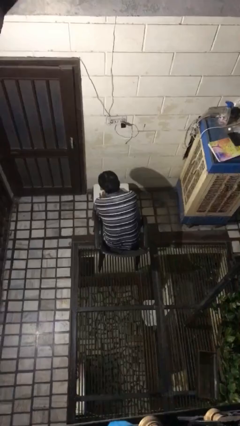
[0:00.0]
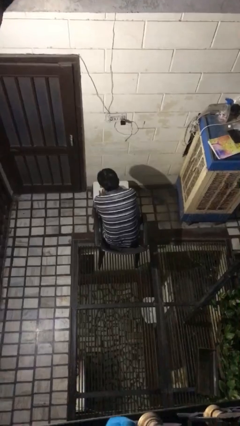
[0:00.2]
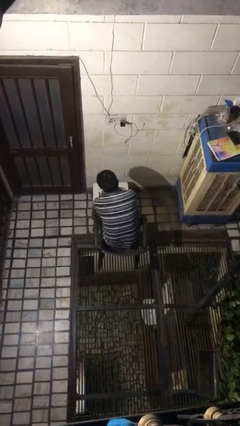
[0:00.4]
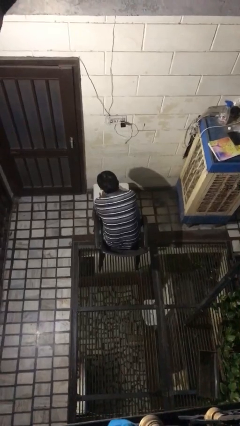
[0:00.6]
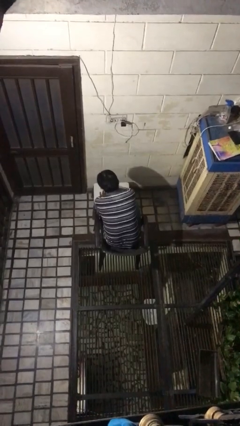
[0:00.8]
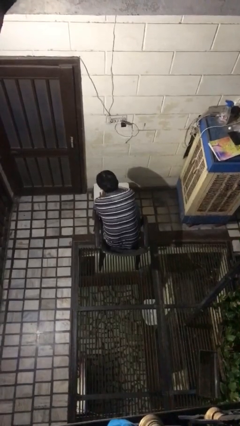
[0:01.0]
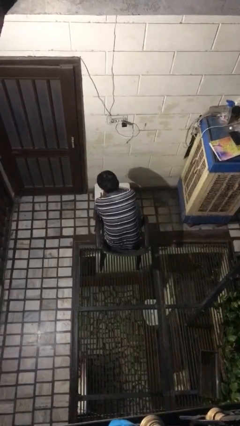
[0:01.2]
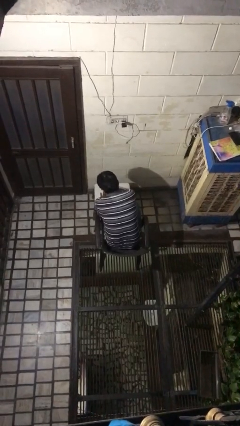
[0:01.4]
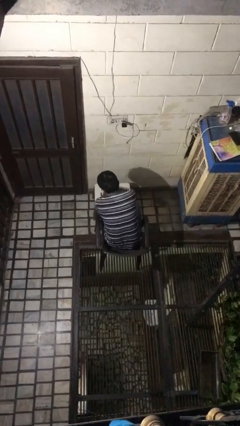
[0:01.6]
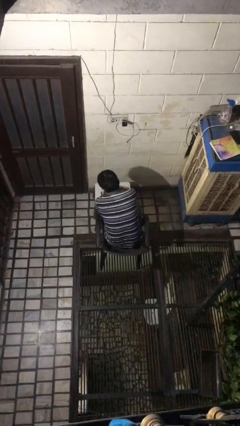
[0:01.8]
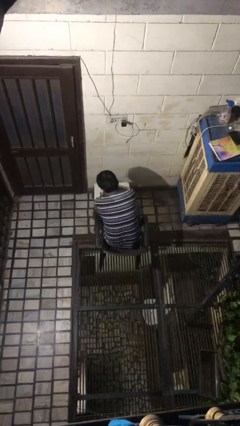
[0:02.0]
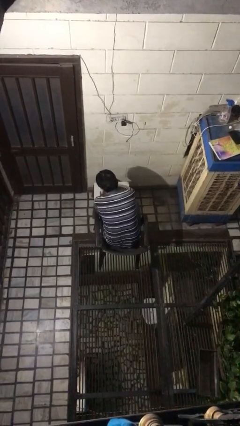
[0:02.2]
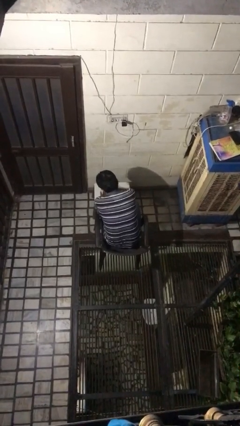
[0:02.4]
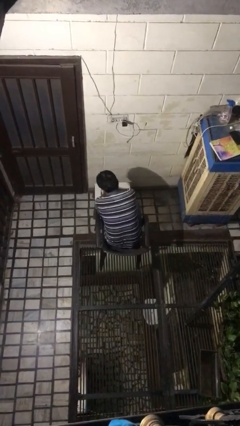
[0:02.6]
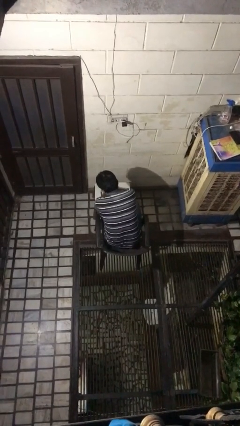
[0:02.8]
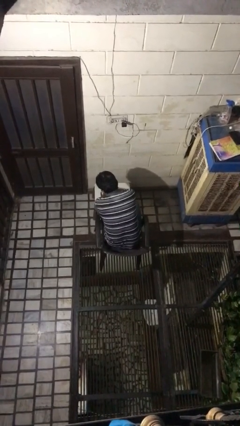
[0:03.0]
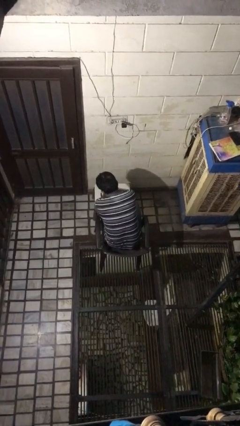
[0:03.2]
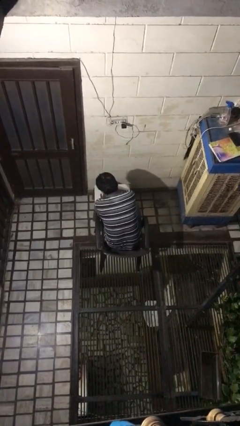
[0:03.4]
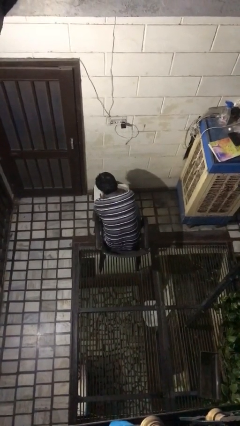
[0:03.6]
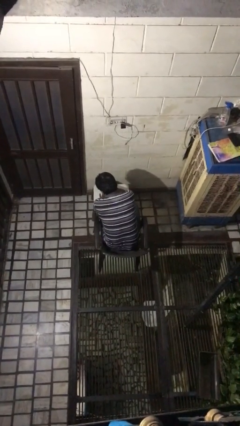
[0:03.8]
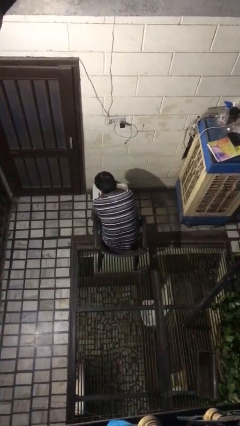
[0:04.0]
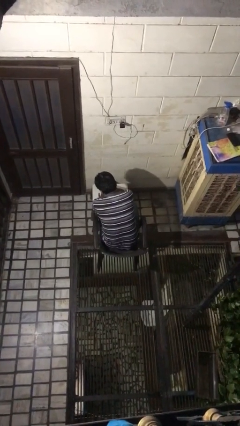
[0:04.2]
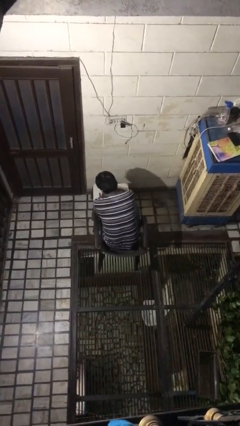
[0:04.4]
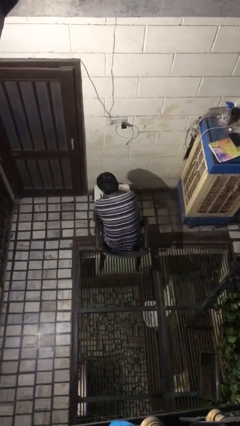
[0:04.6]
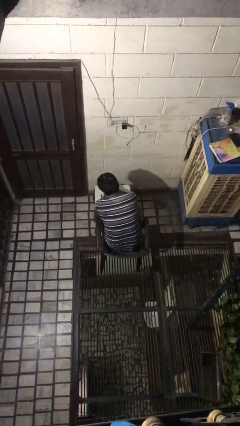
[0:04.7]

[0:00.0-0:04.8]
person paints fingernails

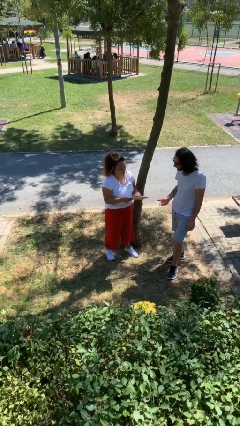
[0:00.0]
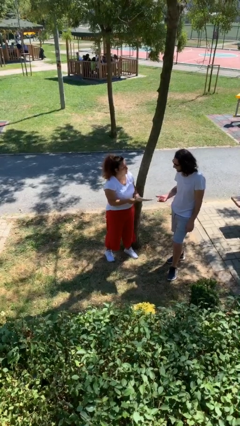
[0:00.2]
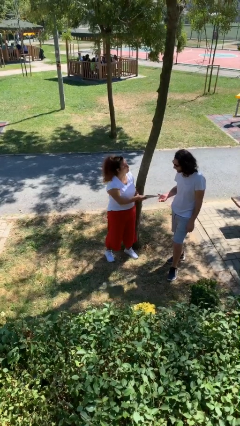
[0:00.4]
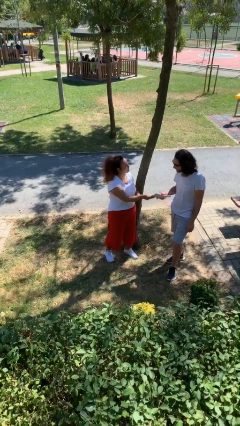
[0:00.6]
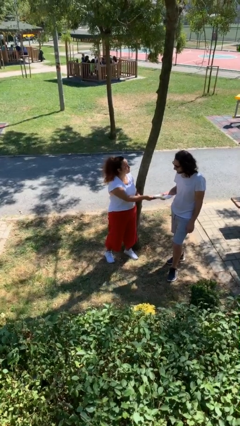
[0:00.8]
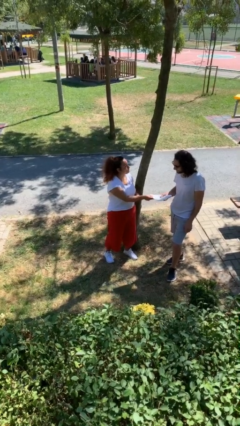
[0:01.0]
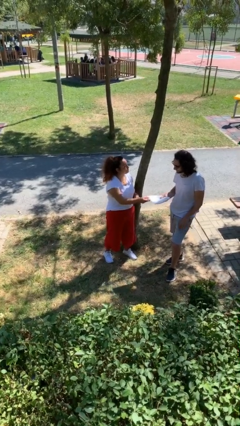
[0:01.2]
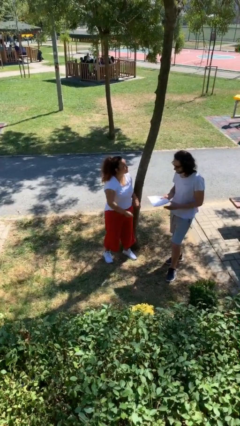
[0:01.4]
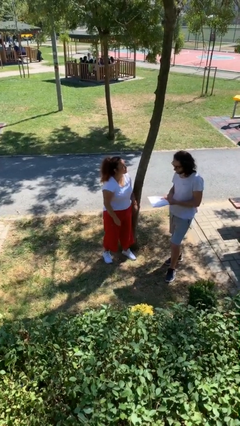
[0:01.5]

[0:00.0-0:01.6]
person transfers object to person

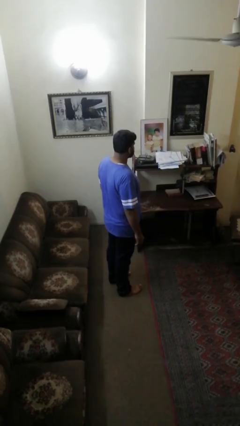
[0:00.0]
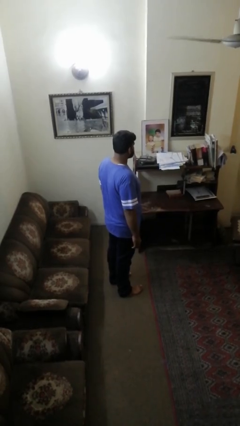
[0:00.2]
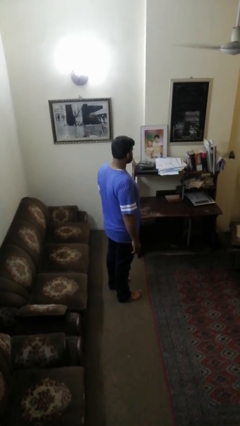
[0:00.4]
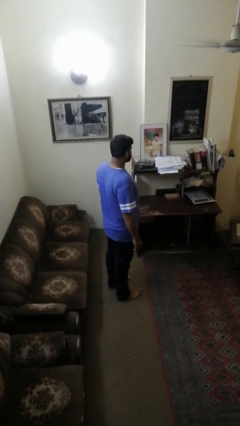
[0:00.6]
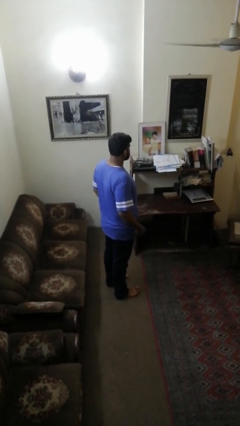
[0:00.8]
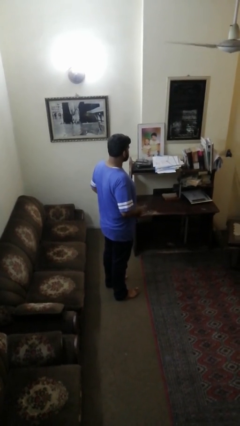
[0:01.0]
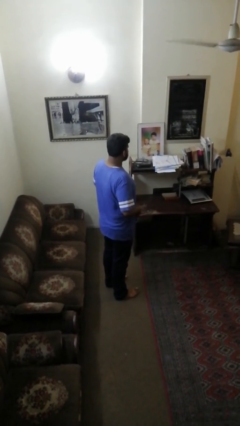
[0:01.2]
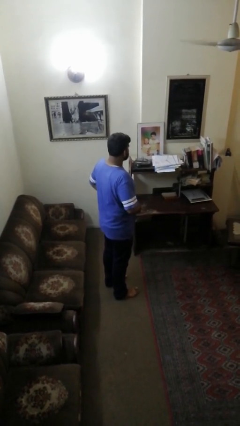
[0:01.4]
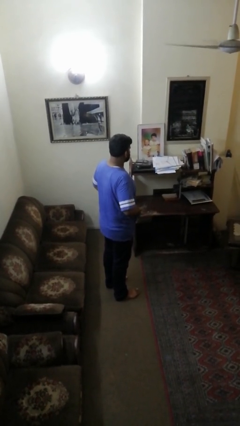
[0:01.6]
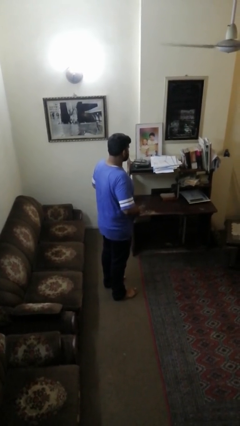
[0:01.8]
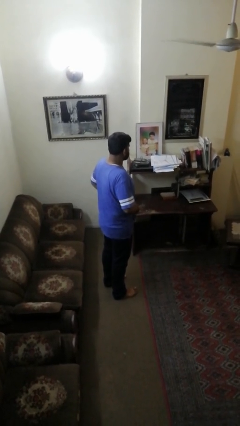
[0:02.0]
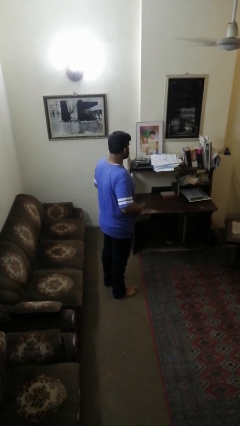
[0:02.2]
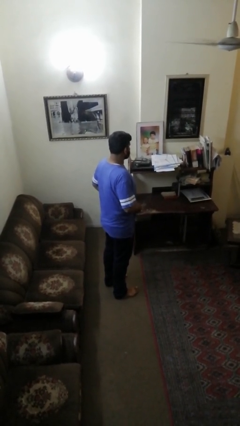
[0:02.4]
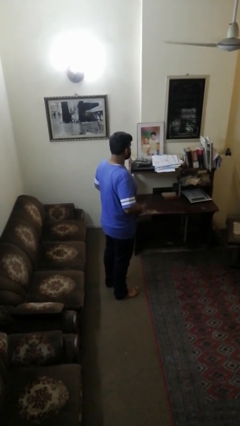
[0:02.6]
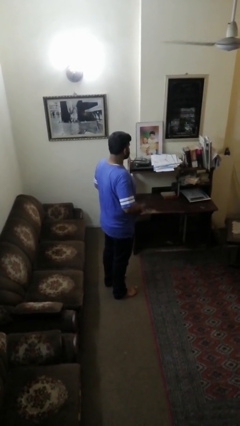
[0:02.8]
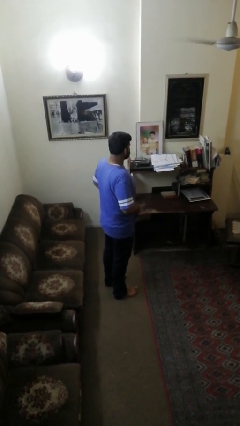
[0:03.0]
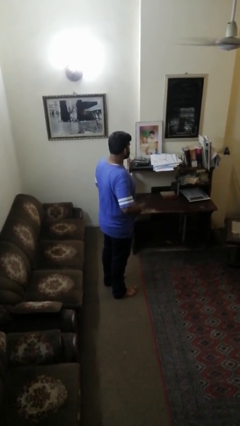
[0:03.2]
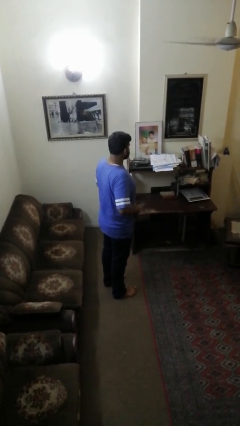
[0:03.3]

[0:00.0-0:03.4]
person hikes up pants

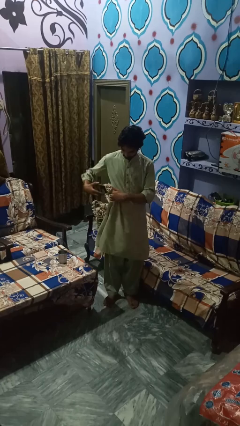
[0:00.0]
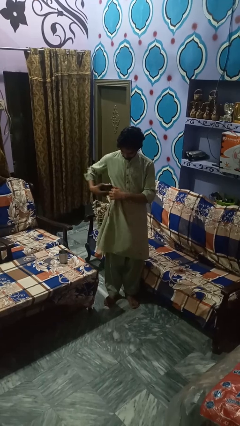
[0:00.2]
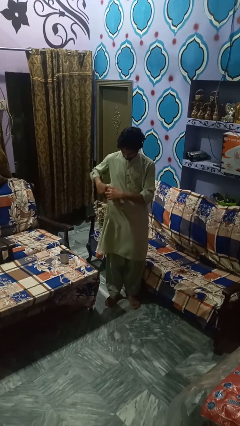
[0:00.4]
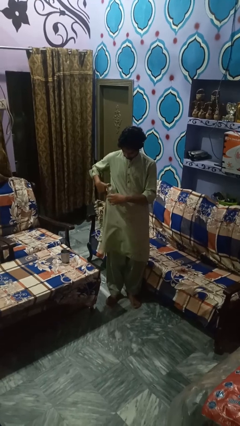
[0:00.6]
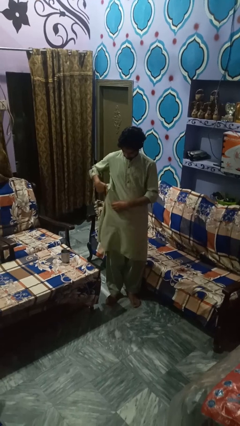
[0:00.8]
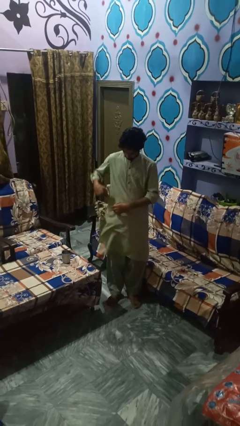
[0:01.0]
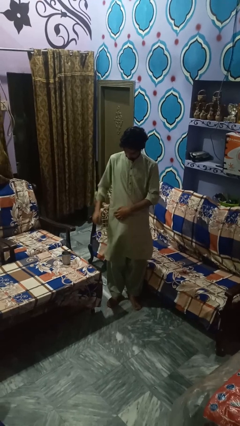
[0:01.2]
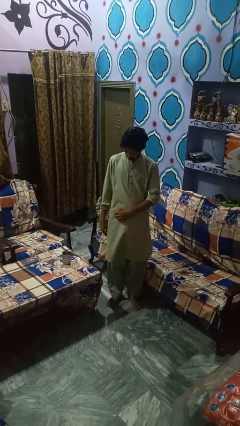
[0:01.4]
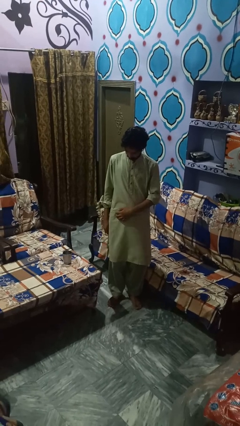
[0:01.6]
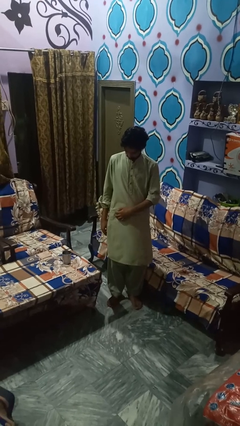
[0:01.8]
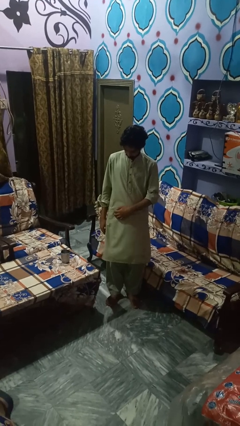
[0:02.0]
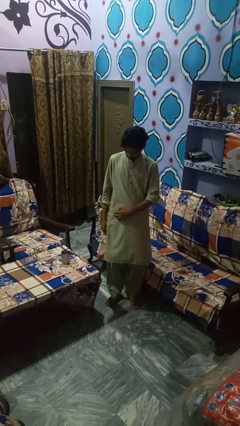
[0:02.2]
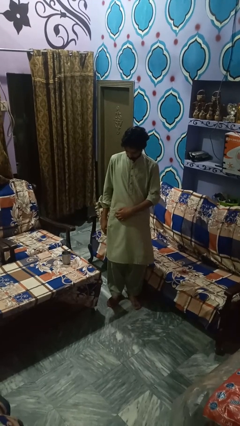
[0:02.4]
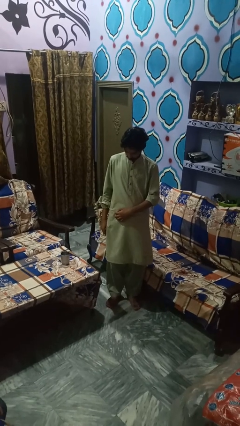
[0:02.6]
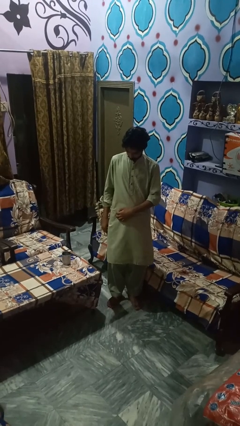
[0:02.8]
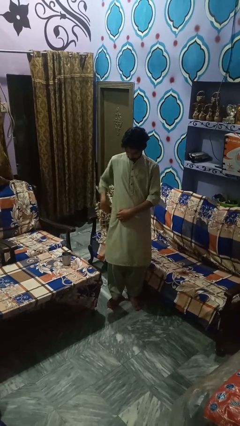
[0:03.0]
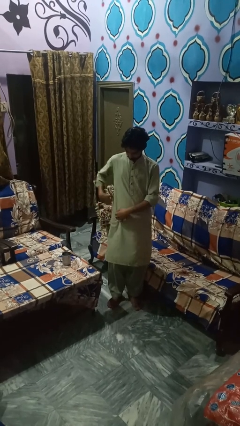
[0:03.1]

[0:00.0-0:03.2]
person puts phone into pocket

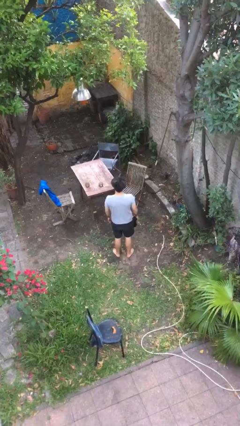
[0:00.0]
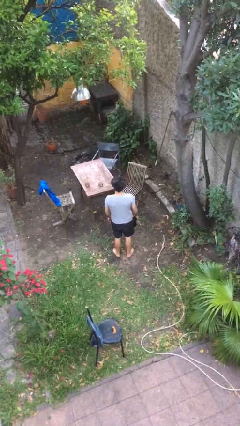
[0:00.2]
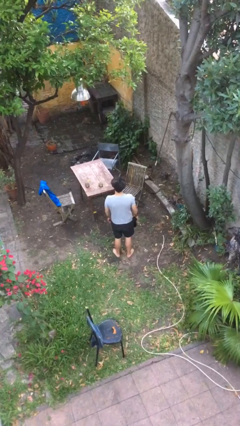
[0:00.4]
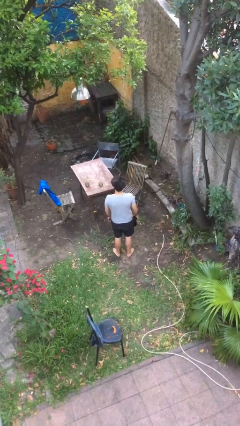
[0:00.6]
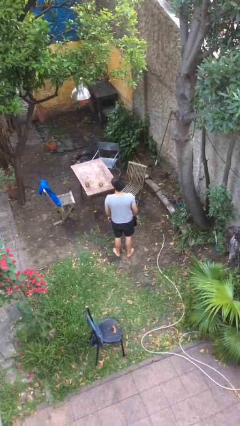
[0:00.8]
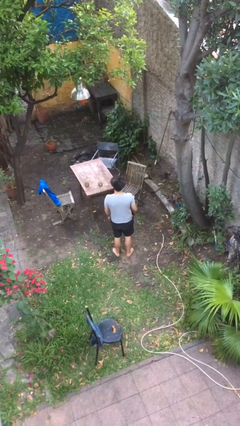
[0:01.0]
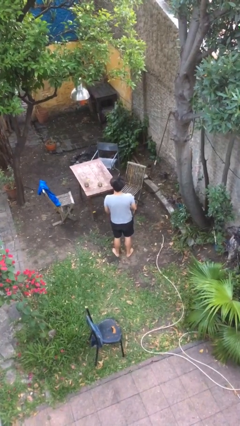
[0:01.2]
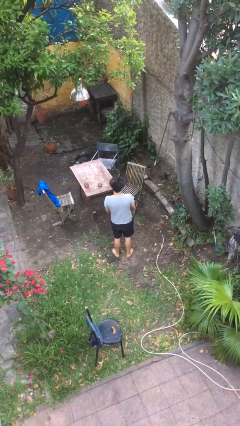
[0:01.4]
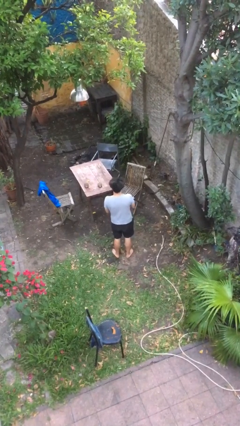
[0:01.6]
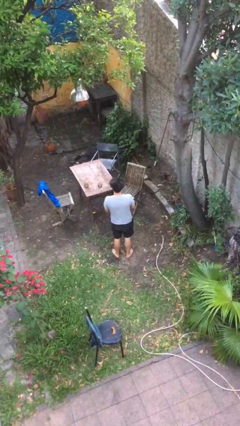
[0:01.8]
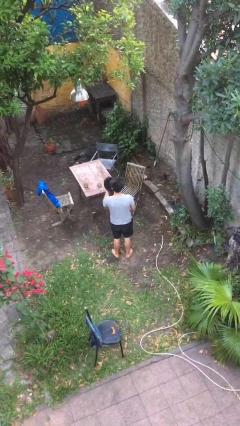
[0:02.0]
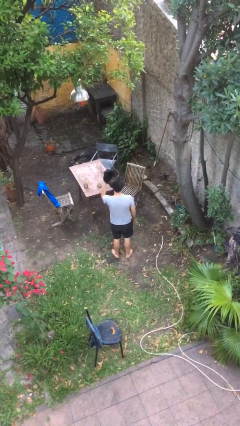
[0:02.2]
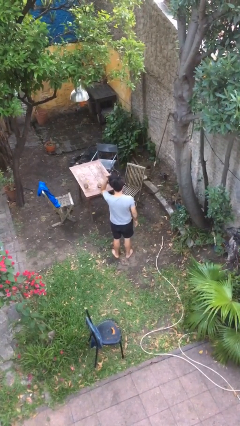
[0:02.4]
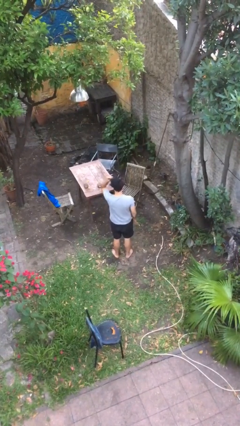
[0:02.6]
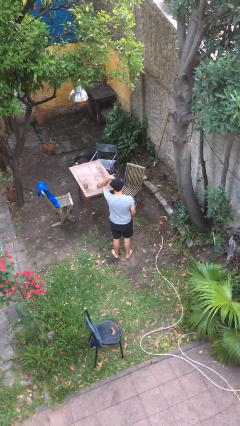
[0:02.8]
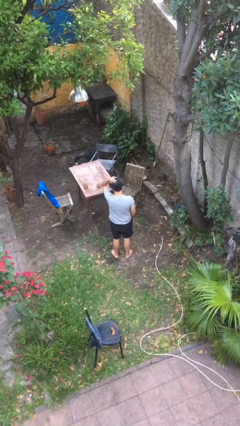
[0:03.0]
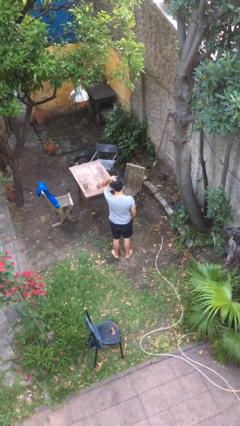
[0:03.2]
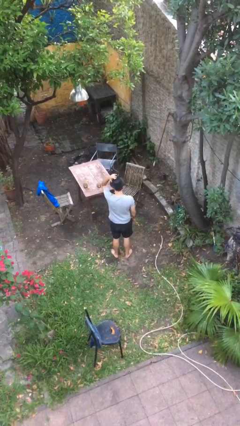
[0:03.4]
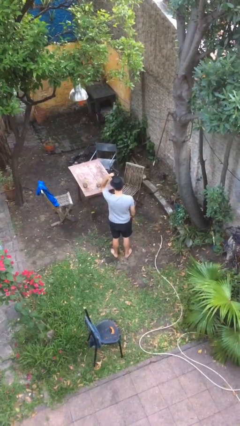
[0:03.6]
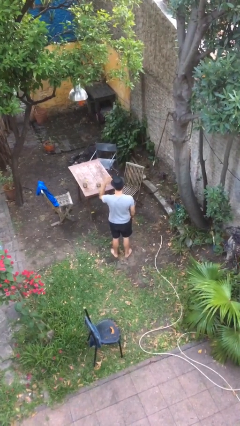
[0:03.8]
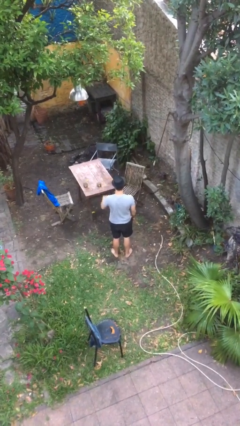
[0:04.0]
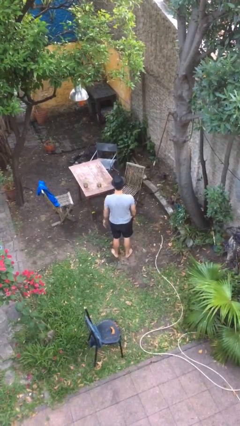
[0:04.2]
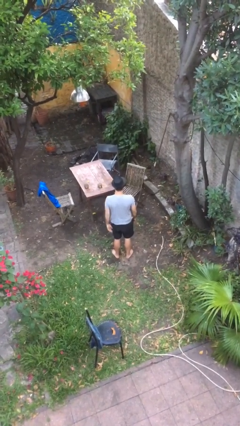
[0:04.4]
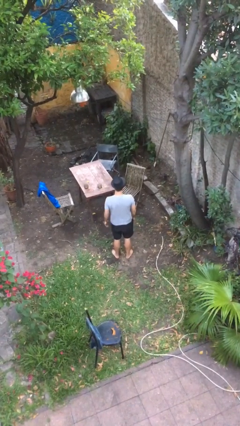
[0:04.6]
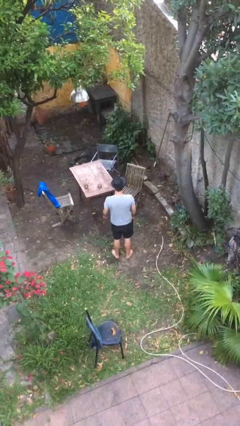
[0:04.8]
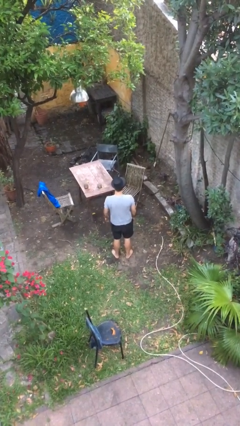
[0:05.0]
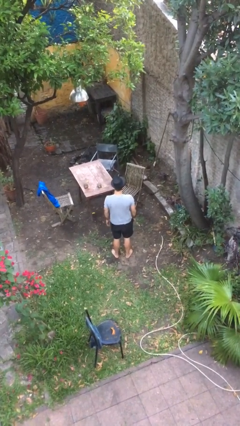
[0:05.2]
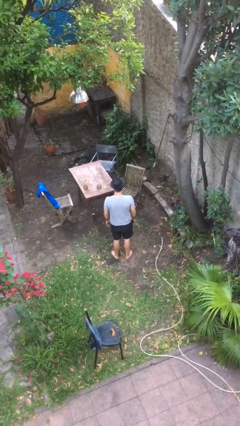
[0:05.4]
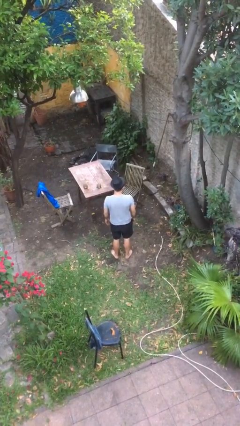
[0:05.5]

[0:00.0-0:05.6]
person puts on hat
